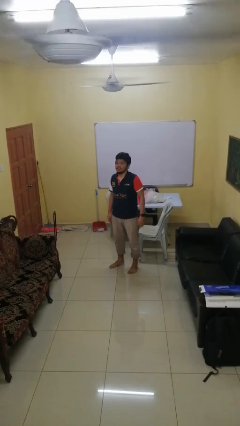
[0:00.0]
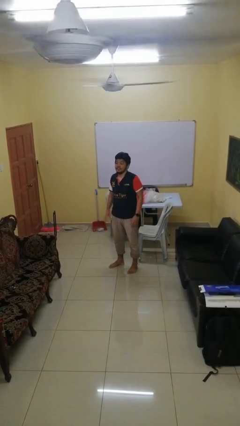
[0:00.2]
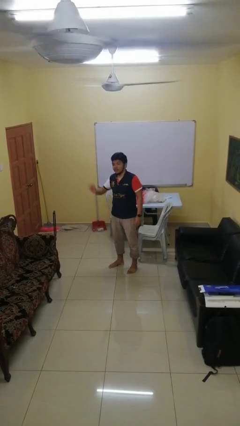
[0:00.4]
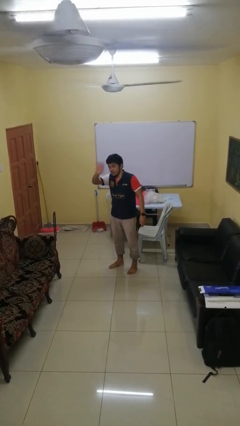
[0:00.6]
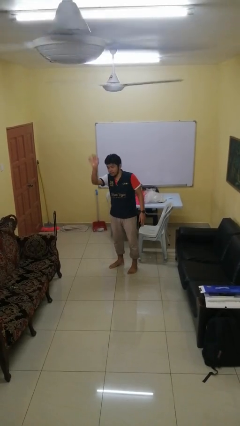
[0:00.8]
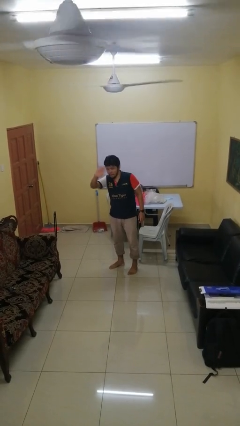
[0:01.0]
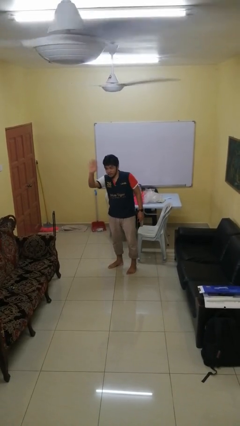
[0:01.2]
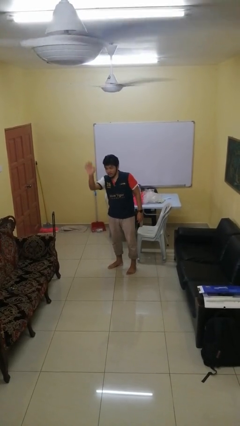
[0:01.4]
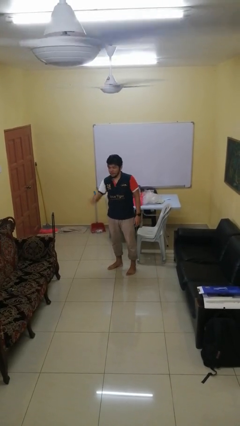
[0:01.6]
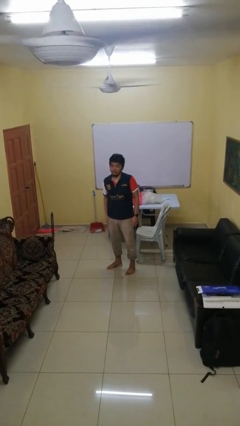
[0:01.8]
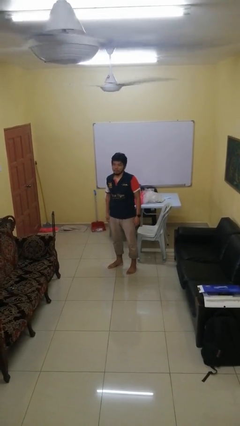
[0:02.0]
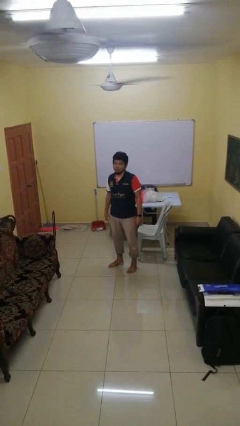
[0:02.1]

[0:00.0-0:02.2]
person waves at person

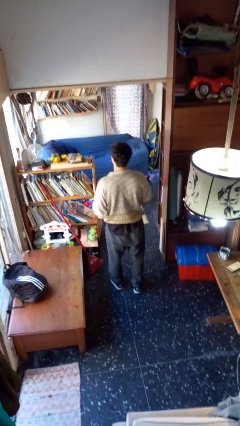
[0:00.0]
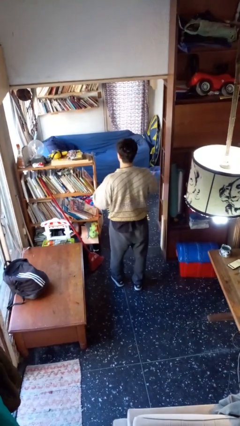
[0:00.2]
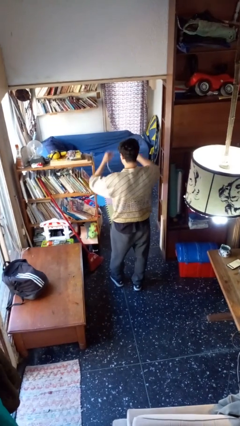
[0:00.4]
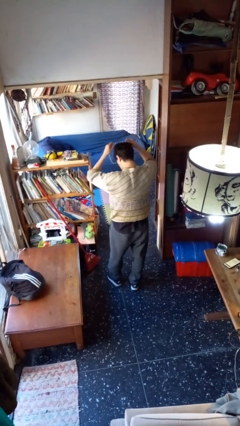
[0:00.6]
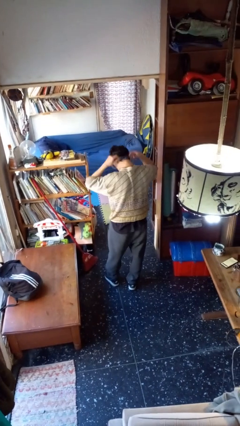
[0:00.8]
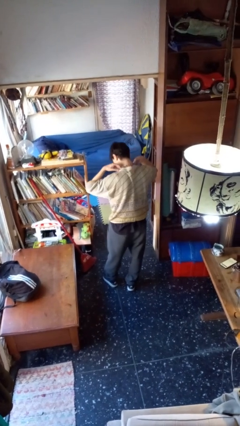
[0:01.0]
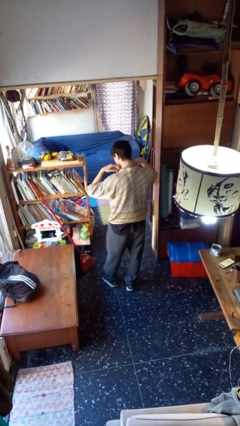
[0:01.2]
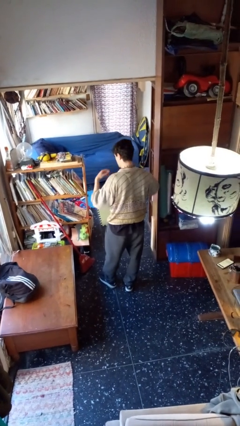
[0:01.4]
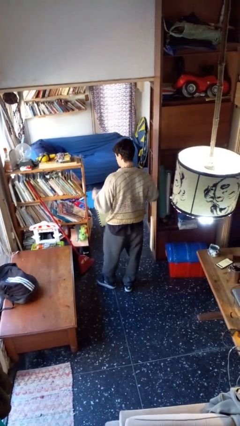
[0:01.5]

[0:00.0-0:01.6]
person puts on necklace

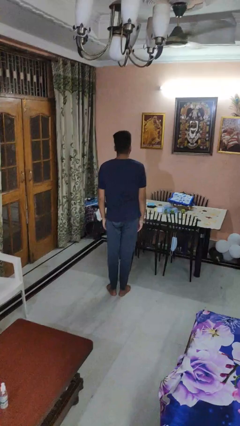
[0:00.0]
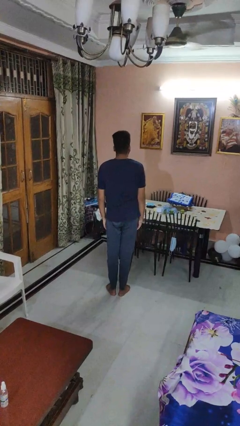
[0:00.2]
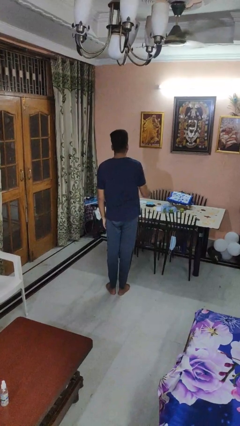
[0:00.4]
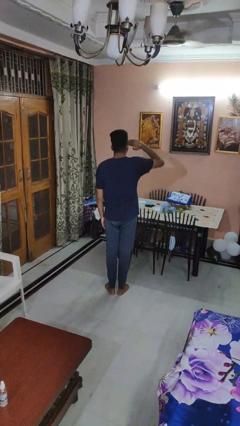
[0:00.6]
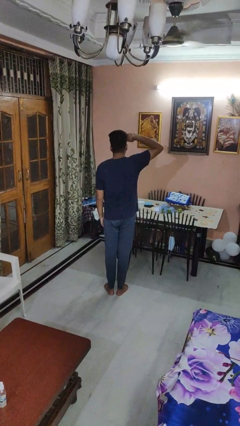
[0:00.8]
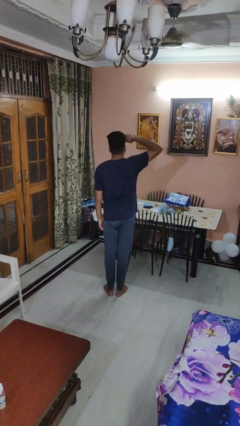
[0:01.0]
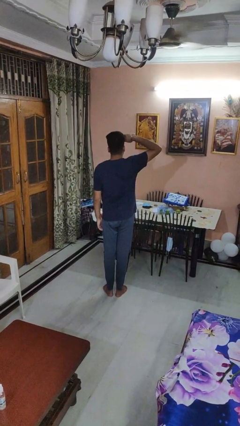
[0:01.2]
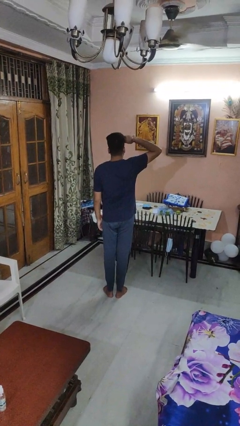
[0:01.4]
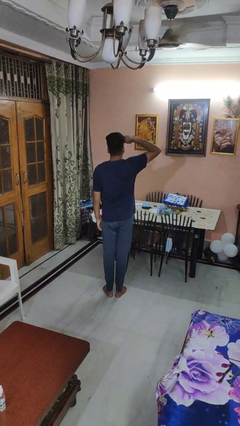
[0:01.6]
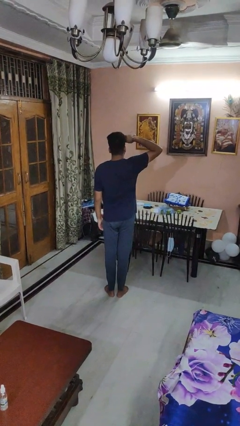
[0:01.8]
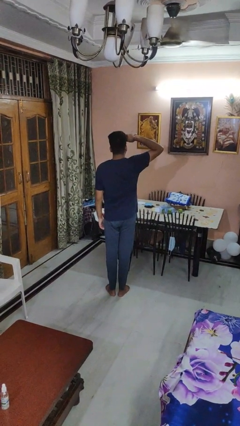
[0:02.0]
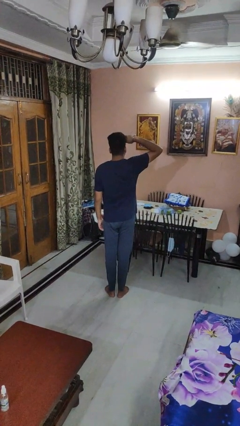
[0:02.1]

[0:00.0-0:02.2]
person salutes

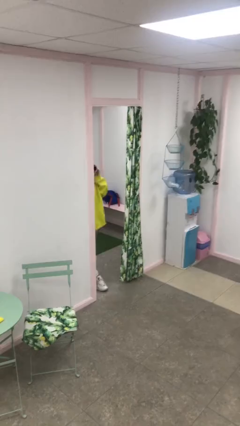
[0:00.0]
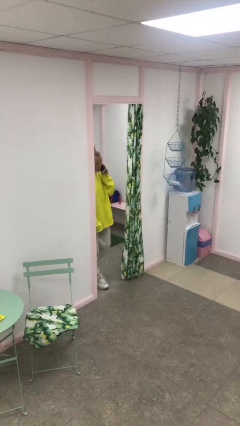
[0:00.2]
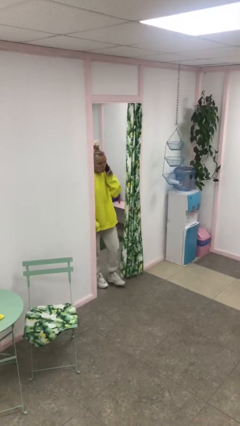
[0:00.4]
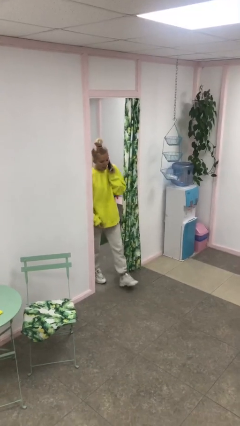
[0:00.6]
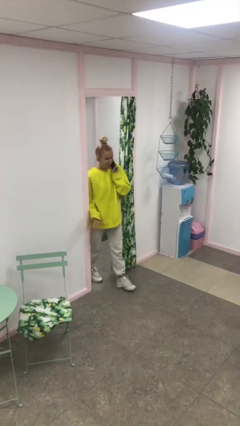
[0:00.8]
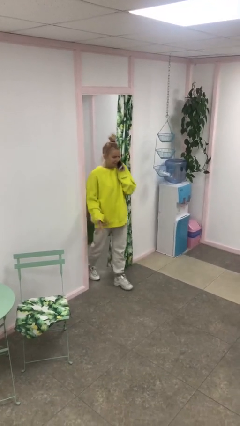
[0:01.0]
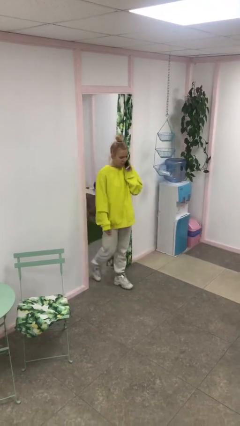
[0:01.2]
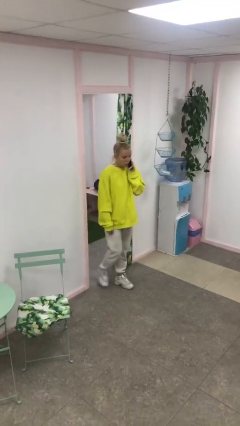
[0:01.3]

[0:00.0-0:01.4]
person enters scene through structure

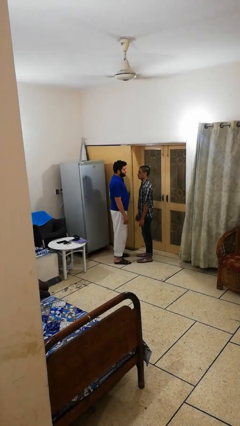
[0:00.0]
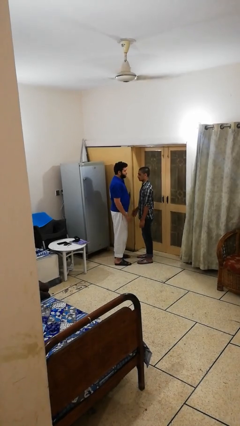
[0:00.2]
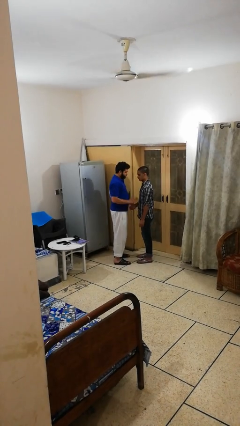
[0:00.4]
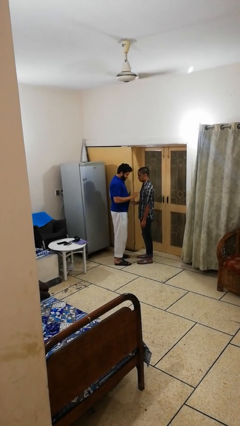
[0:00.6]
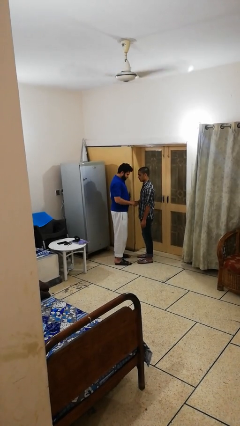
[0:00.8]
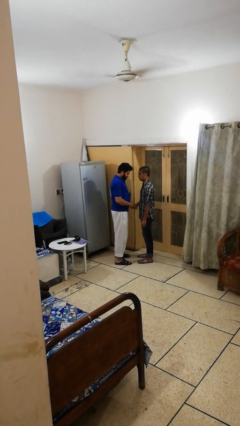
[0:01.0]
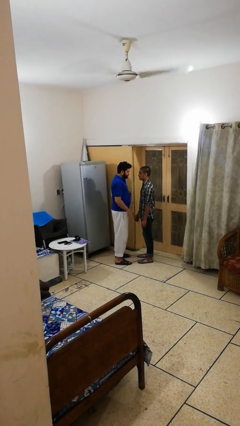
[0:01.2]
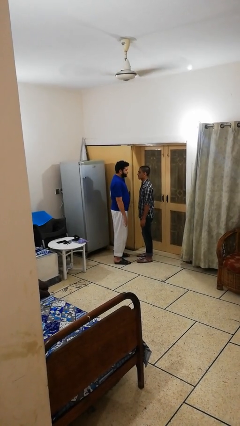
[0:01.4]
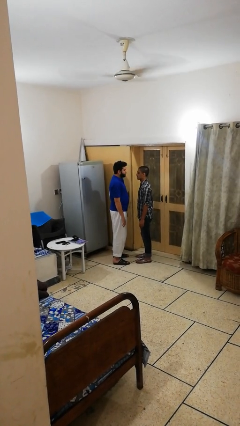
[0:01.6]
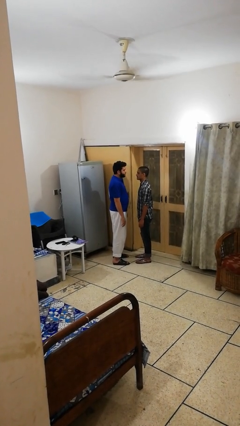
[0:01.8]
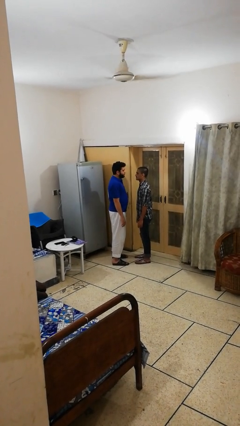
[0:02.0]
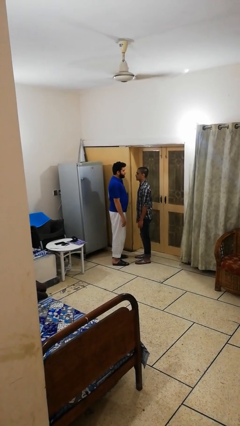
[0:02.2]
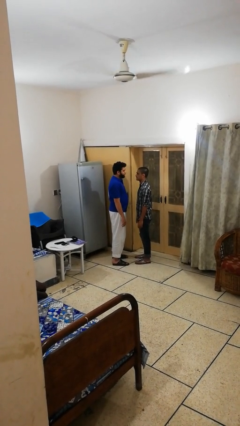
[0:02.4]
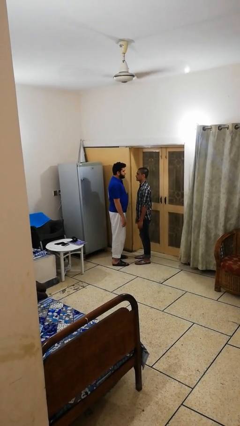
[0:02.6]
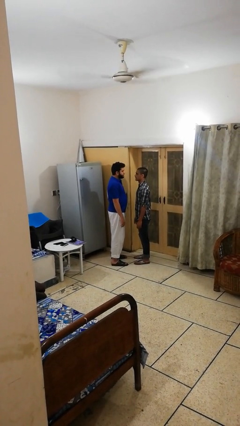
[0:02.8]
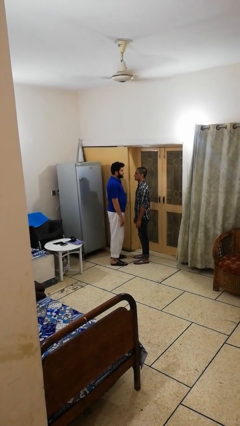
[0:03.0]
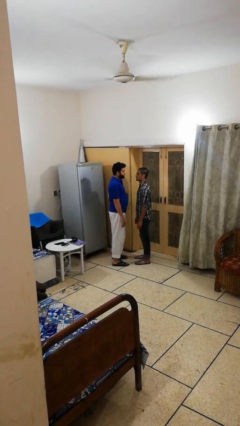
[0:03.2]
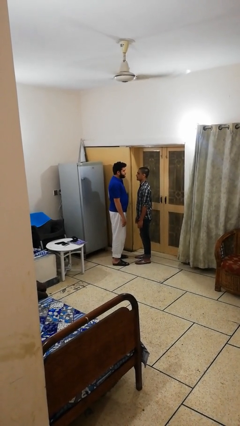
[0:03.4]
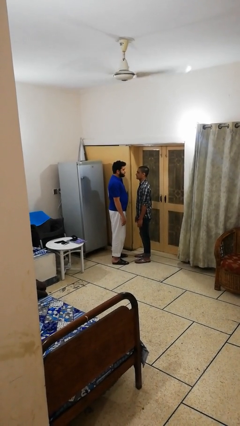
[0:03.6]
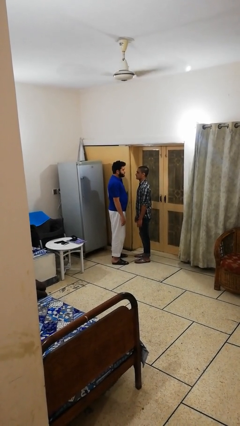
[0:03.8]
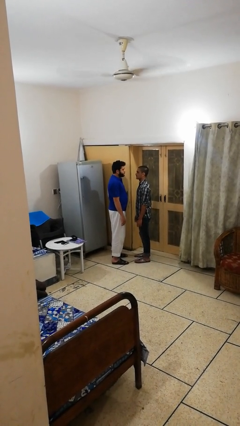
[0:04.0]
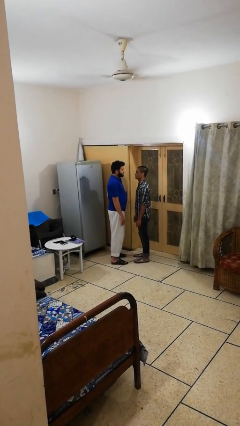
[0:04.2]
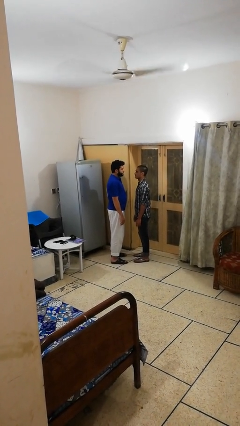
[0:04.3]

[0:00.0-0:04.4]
person highfives hand

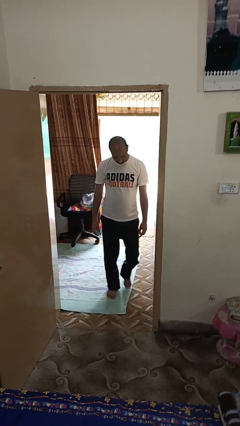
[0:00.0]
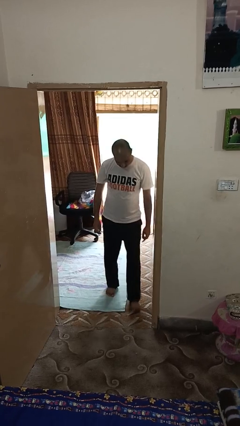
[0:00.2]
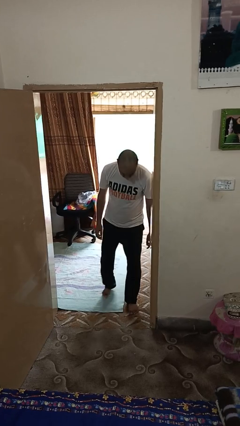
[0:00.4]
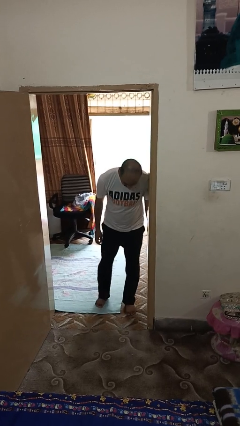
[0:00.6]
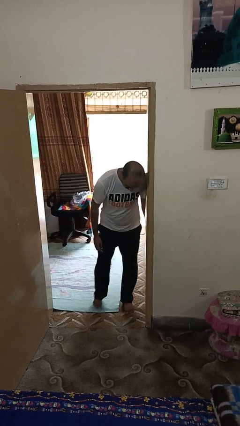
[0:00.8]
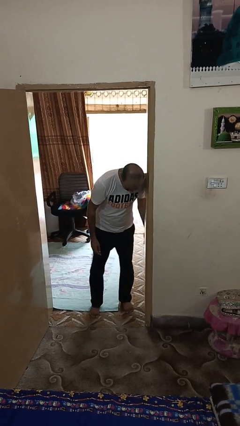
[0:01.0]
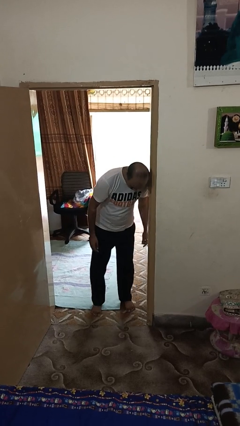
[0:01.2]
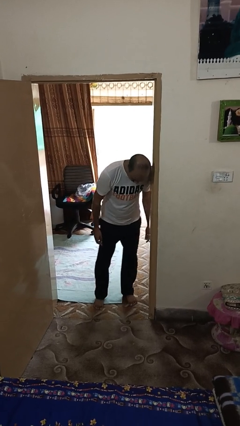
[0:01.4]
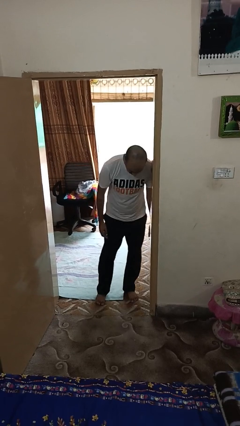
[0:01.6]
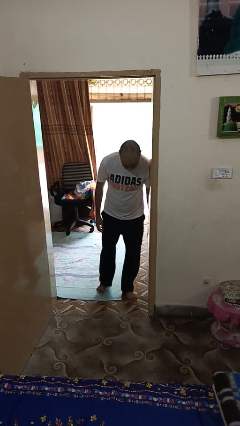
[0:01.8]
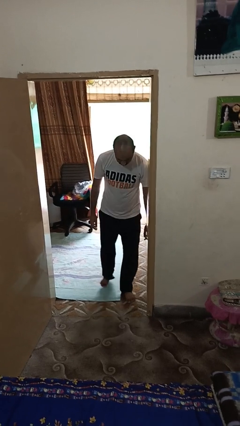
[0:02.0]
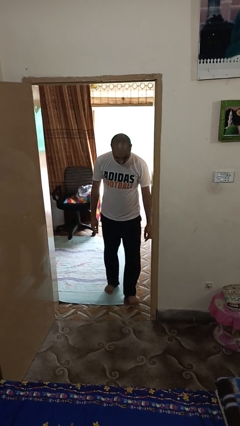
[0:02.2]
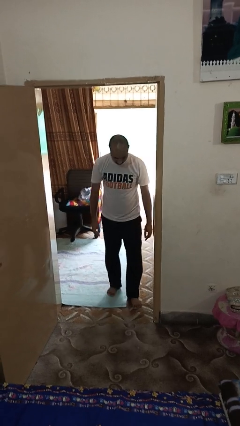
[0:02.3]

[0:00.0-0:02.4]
person bumps into wall

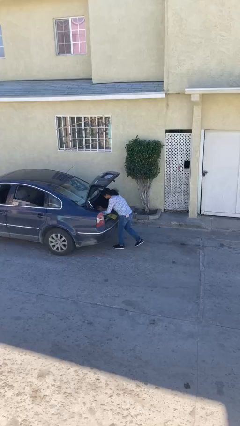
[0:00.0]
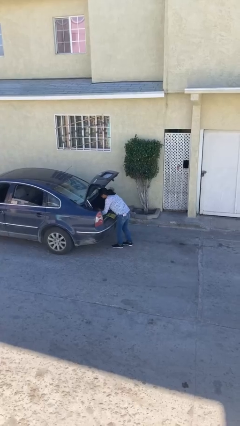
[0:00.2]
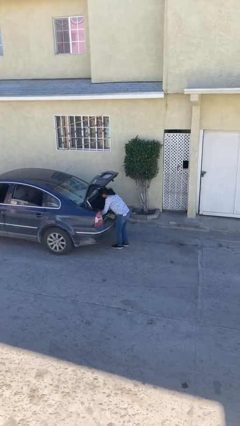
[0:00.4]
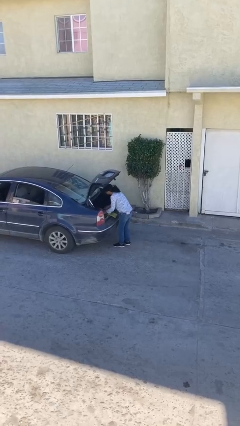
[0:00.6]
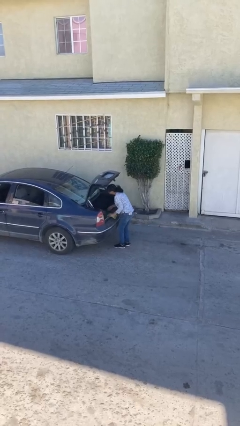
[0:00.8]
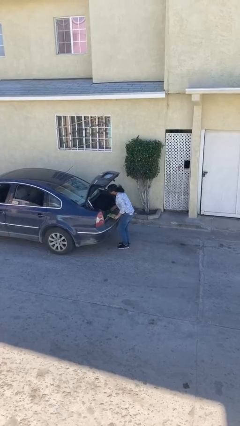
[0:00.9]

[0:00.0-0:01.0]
person loads car

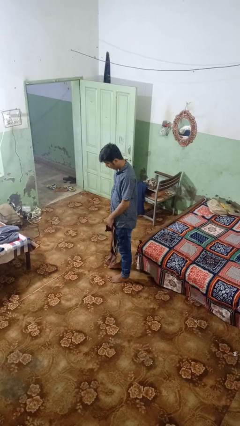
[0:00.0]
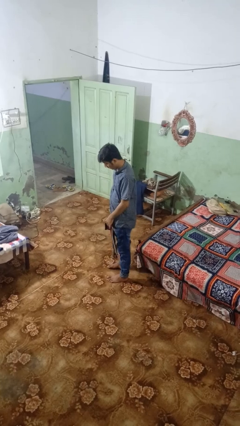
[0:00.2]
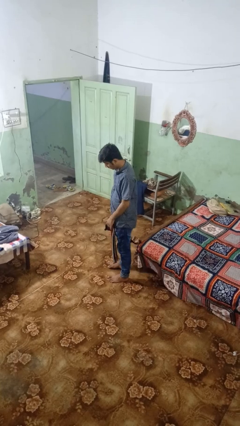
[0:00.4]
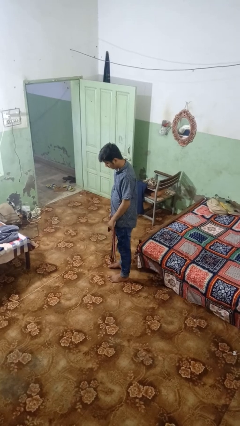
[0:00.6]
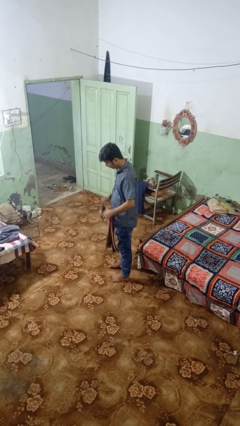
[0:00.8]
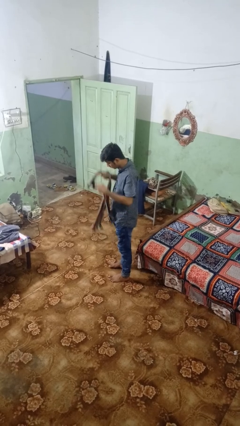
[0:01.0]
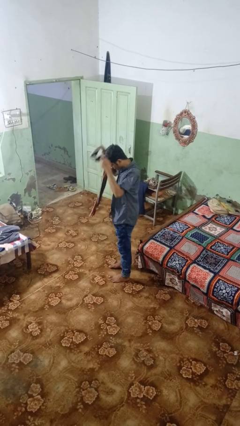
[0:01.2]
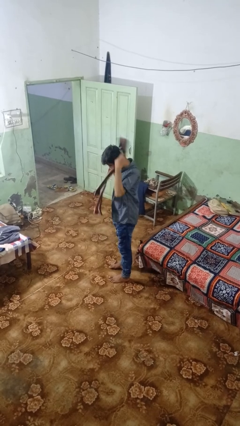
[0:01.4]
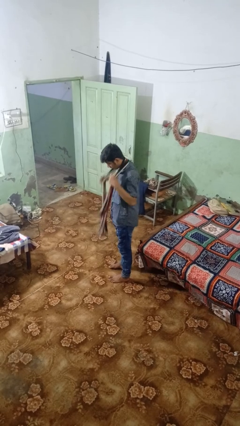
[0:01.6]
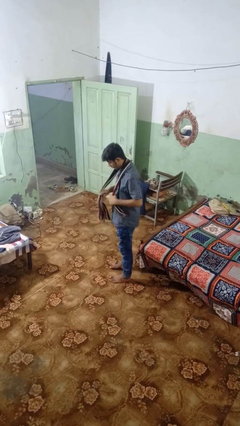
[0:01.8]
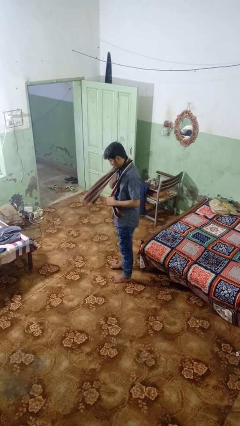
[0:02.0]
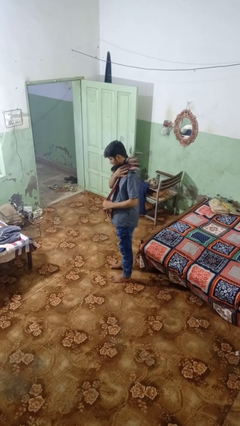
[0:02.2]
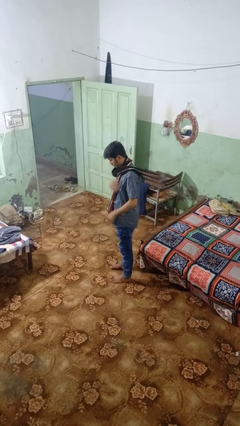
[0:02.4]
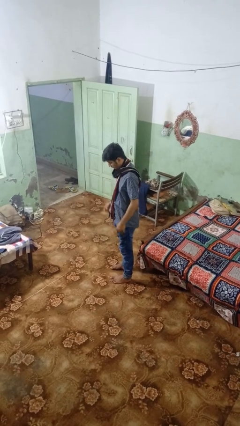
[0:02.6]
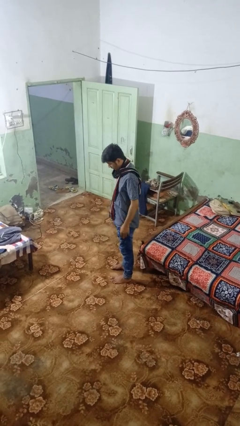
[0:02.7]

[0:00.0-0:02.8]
person puts on scarf
